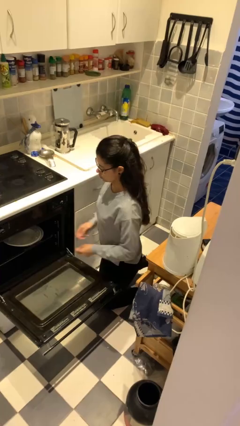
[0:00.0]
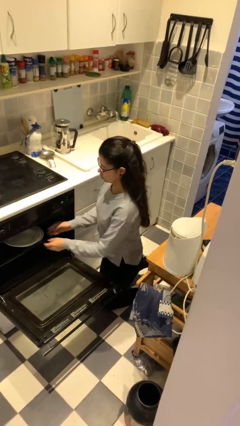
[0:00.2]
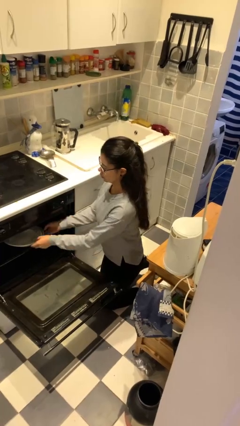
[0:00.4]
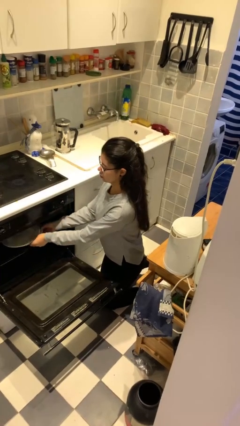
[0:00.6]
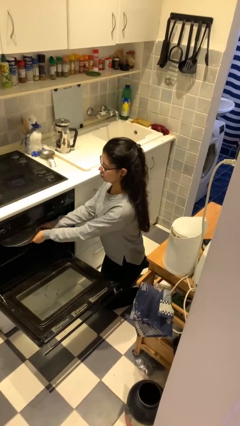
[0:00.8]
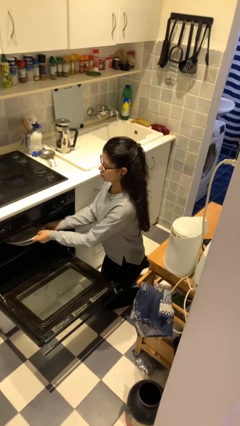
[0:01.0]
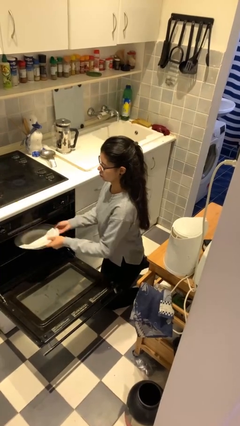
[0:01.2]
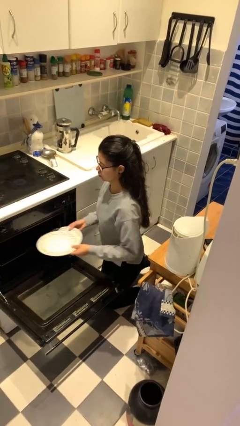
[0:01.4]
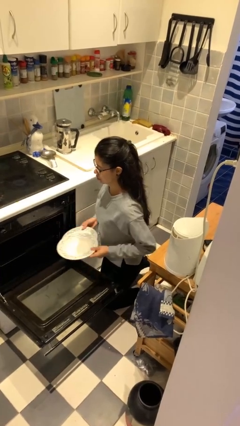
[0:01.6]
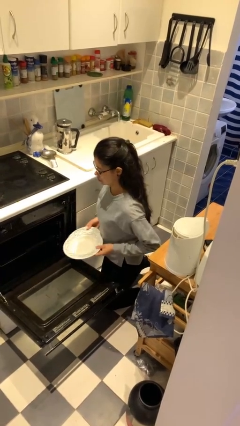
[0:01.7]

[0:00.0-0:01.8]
person unloads dishwasher

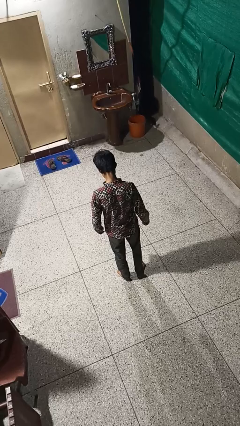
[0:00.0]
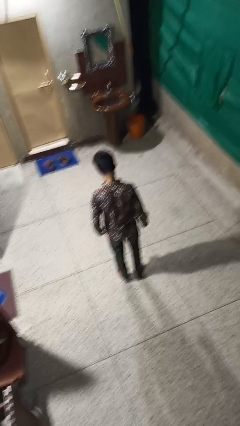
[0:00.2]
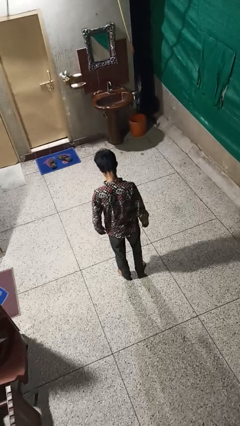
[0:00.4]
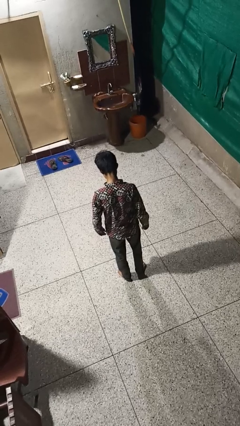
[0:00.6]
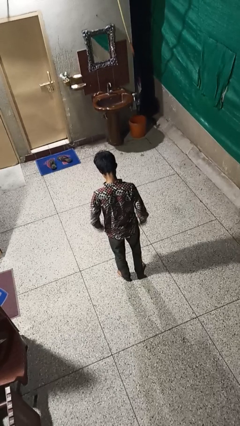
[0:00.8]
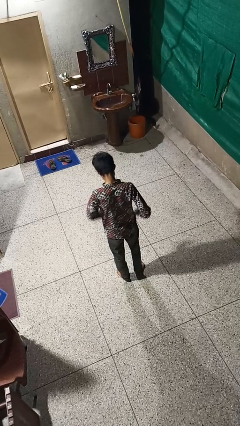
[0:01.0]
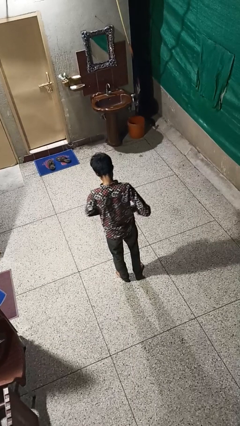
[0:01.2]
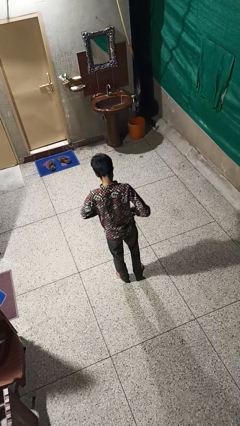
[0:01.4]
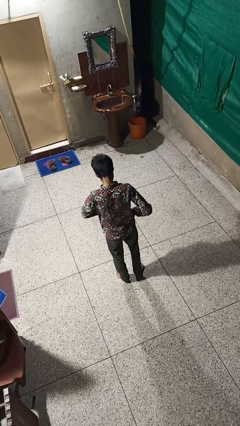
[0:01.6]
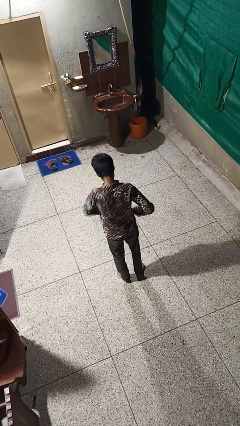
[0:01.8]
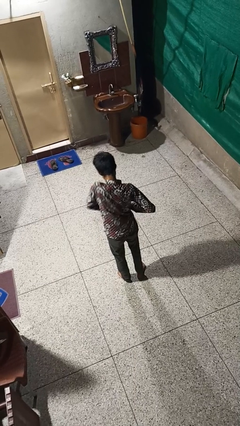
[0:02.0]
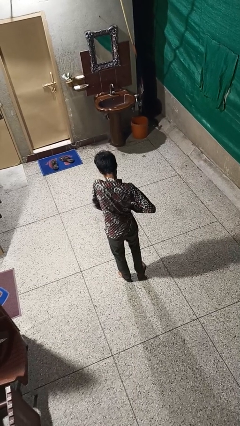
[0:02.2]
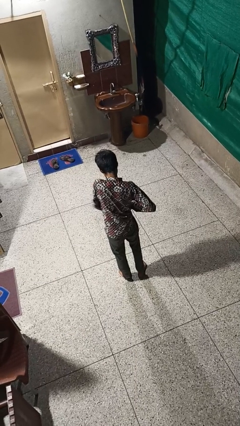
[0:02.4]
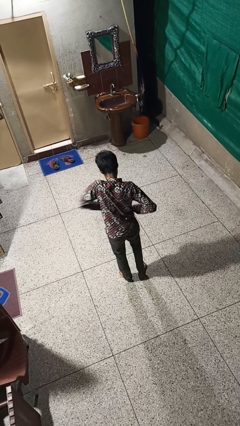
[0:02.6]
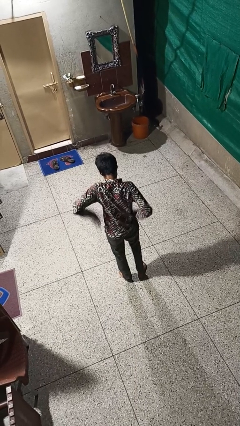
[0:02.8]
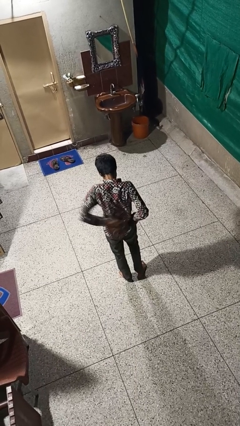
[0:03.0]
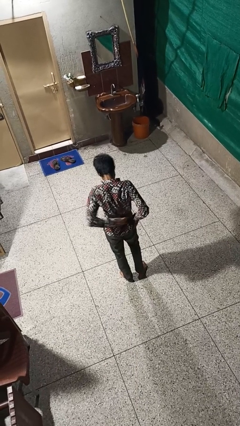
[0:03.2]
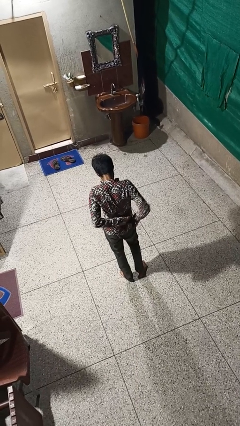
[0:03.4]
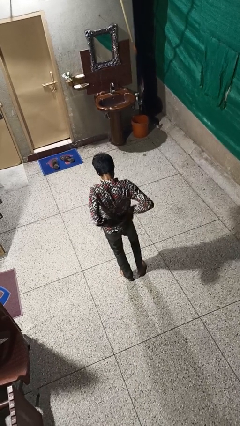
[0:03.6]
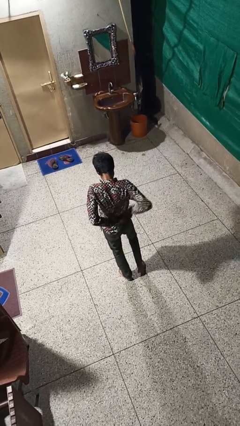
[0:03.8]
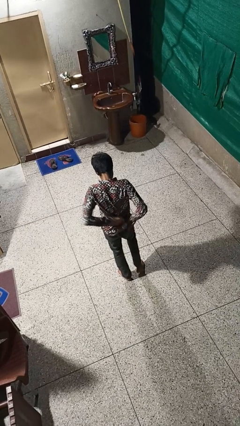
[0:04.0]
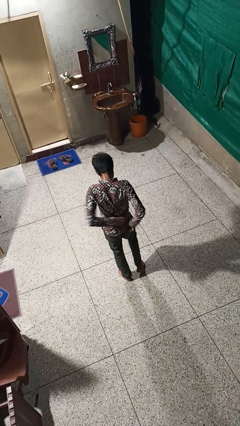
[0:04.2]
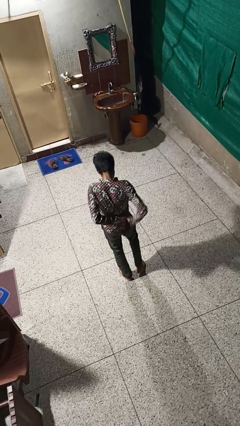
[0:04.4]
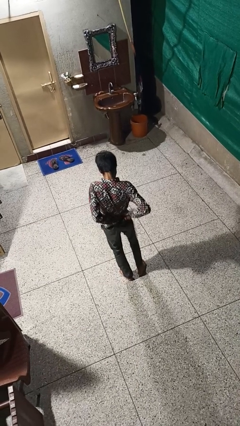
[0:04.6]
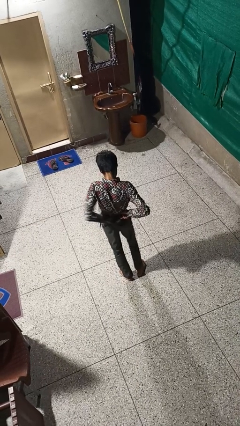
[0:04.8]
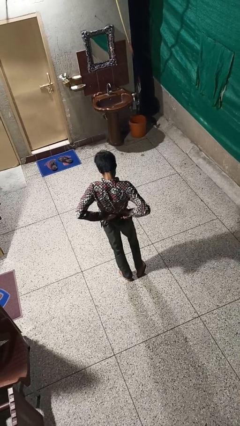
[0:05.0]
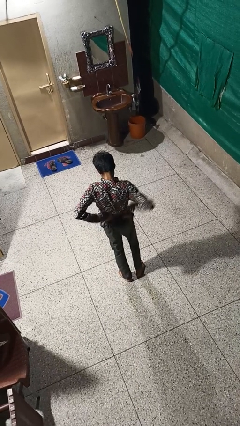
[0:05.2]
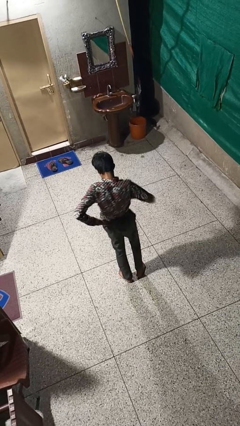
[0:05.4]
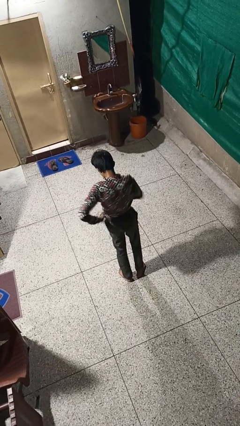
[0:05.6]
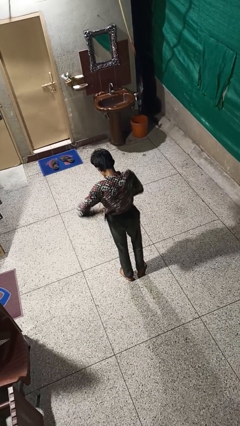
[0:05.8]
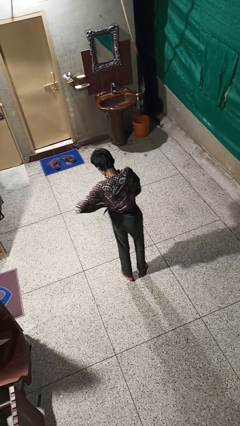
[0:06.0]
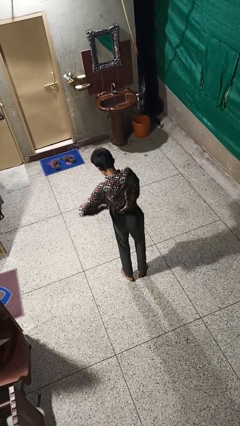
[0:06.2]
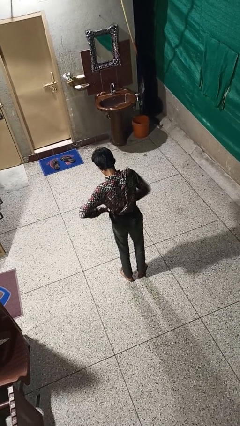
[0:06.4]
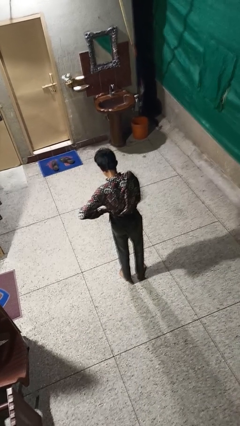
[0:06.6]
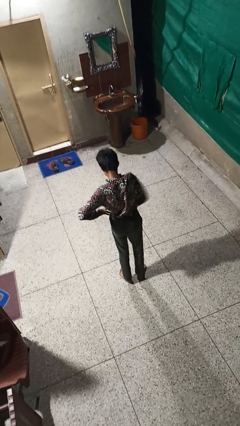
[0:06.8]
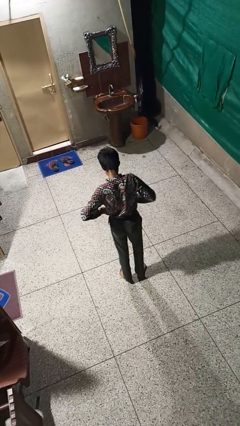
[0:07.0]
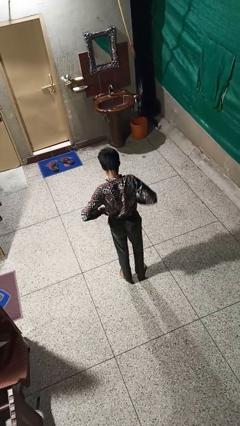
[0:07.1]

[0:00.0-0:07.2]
person tucks in shirt

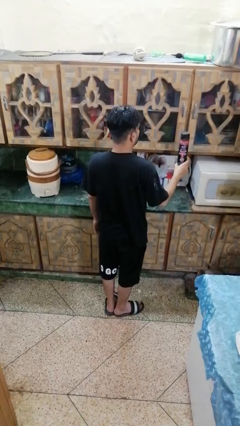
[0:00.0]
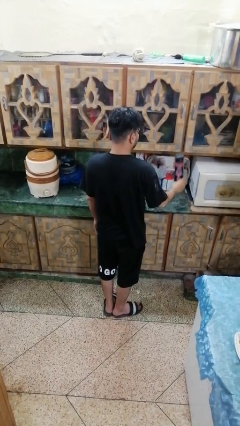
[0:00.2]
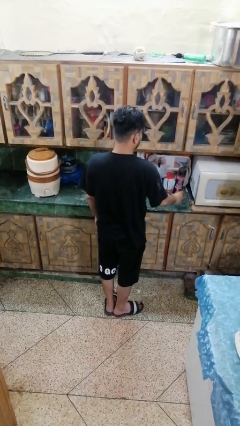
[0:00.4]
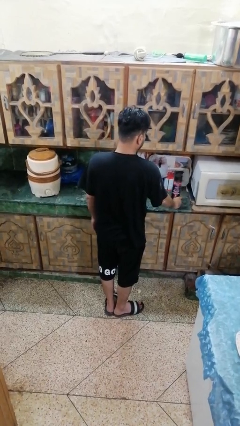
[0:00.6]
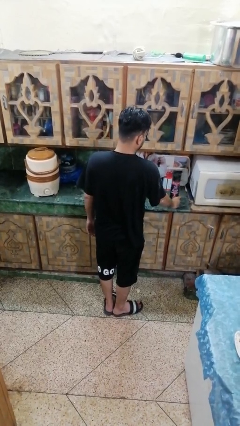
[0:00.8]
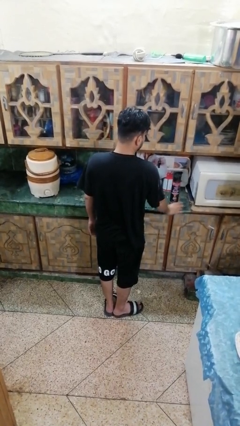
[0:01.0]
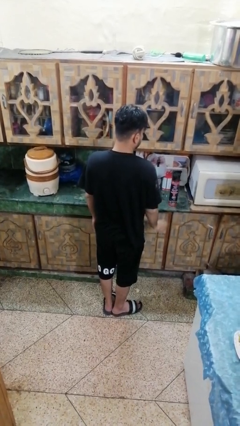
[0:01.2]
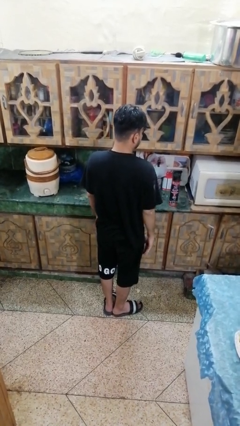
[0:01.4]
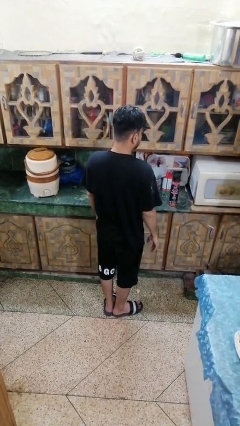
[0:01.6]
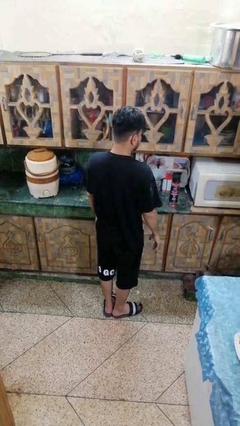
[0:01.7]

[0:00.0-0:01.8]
person puts down object on countertop

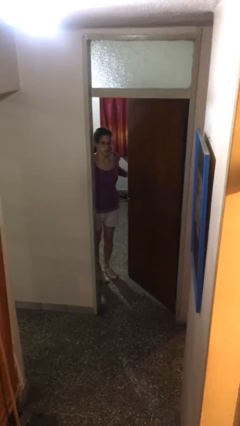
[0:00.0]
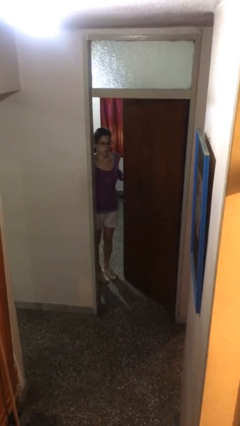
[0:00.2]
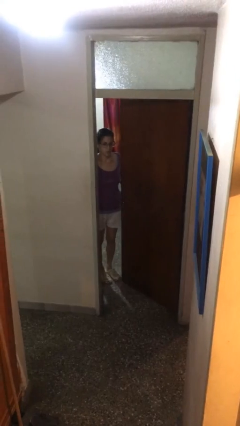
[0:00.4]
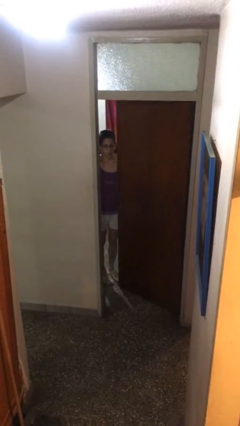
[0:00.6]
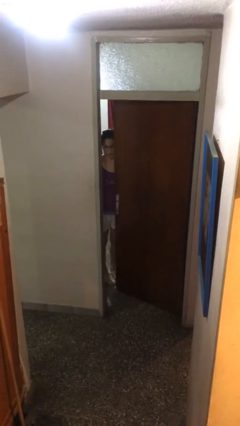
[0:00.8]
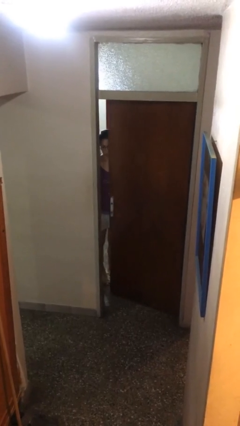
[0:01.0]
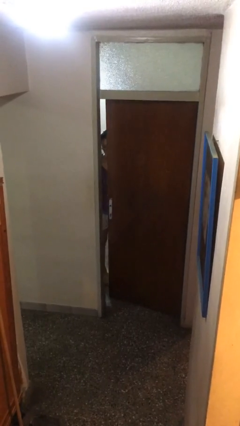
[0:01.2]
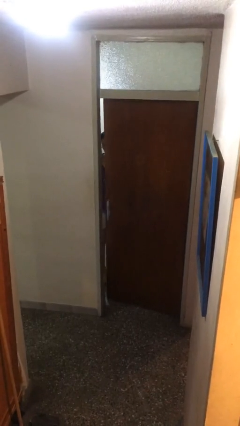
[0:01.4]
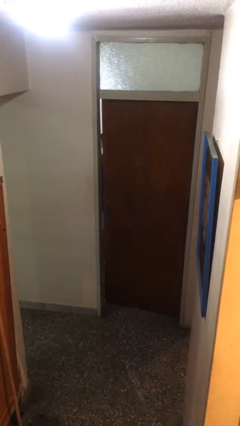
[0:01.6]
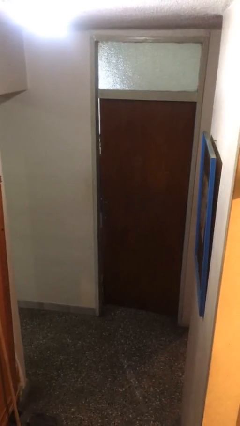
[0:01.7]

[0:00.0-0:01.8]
person closes facility door

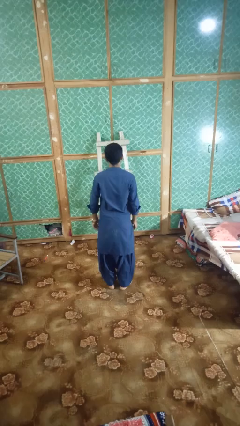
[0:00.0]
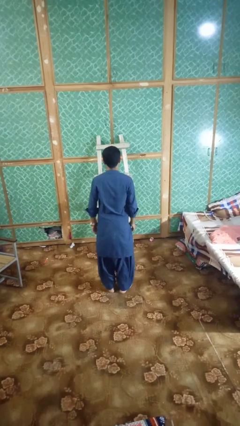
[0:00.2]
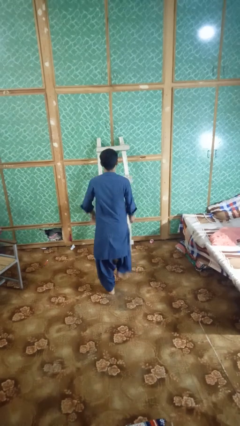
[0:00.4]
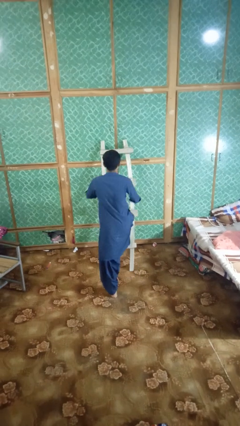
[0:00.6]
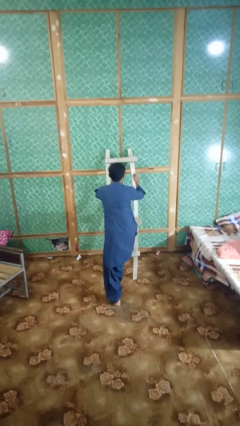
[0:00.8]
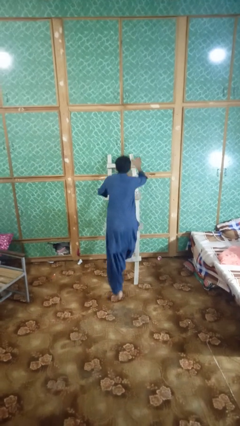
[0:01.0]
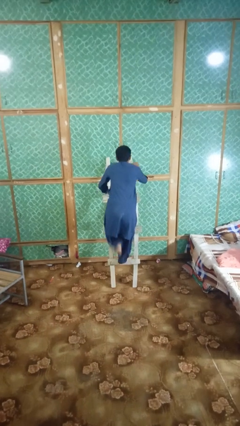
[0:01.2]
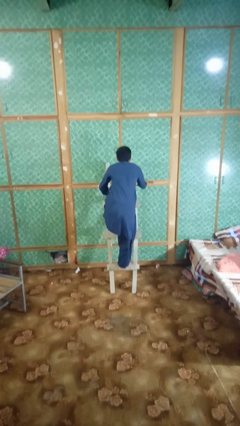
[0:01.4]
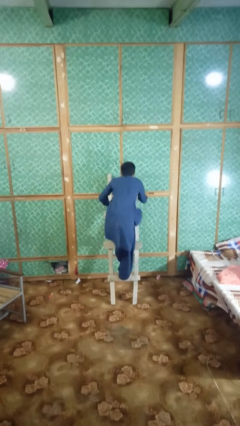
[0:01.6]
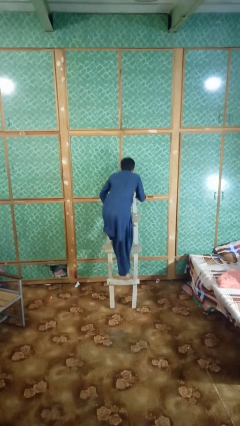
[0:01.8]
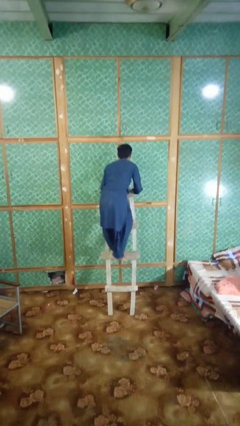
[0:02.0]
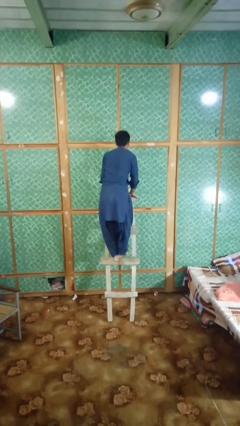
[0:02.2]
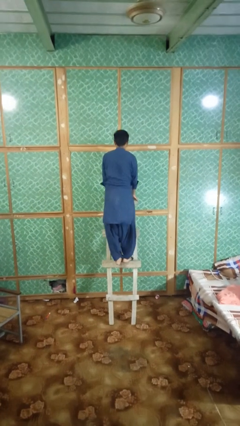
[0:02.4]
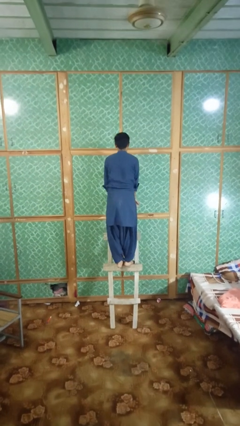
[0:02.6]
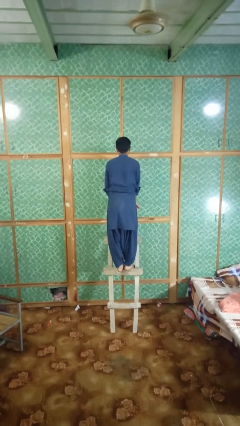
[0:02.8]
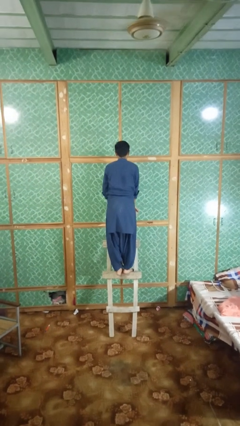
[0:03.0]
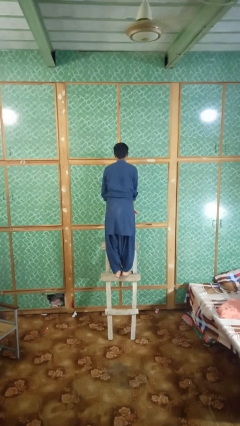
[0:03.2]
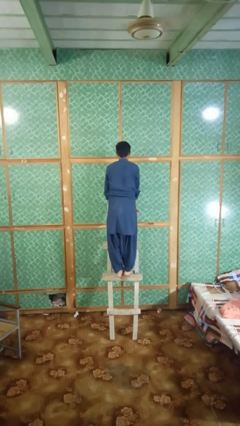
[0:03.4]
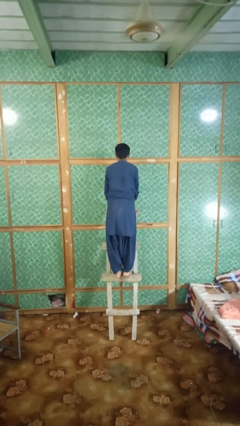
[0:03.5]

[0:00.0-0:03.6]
person climbs up ladder

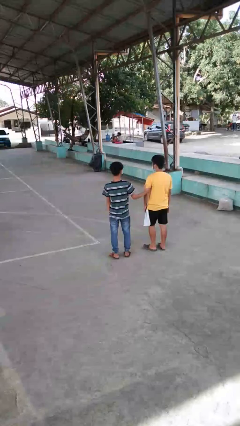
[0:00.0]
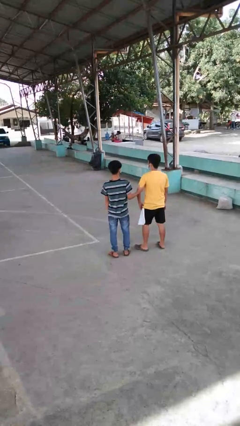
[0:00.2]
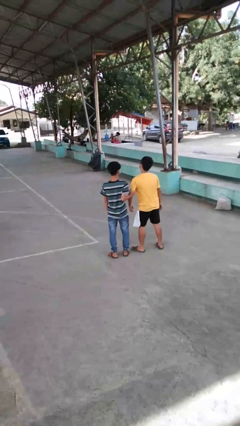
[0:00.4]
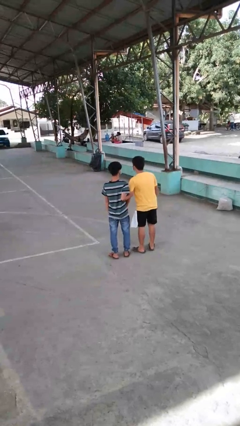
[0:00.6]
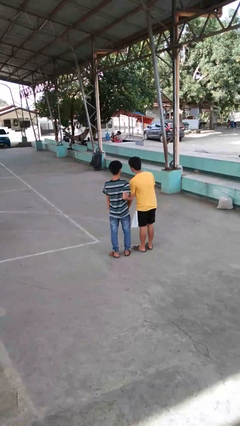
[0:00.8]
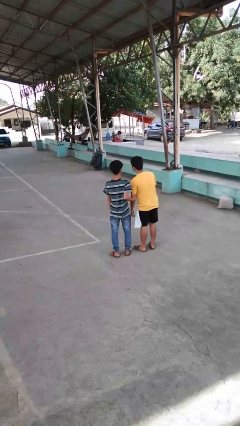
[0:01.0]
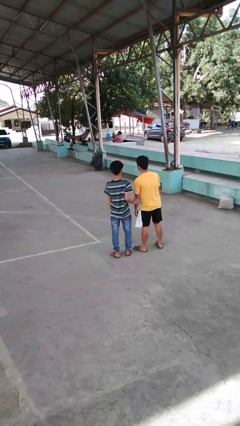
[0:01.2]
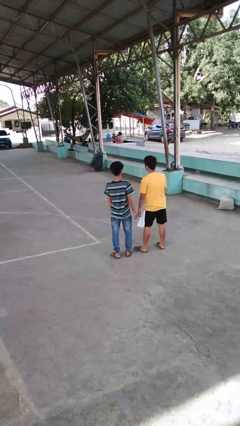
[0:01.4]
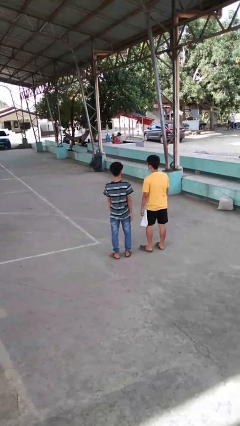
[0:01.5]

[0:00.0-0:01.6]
person grabs person by bicep
